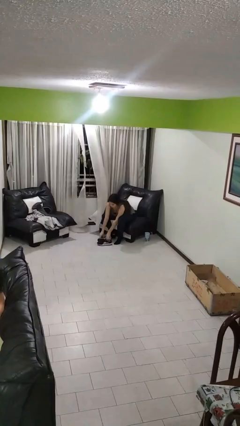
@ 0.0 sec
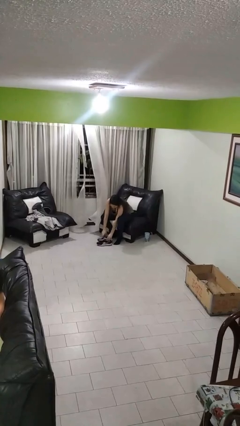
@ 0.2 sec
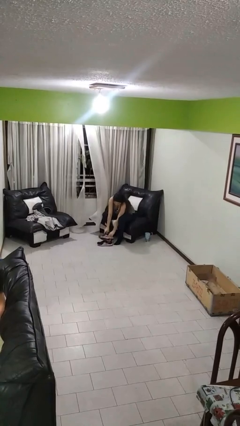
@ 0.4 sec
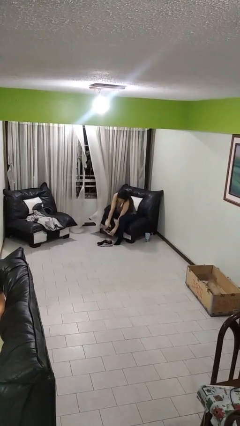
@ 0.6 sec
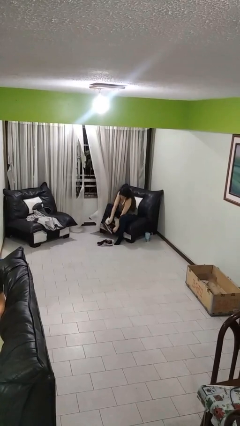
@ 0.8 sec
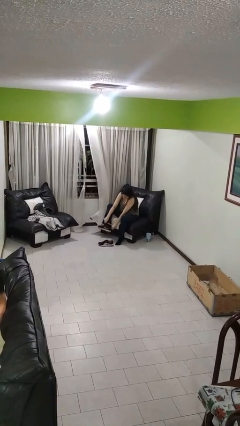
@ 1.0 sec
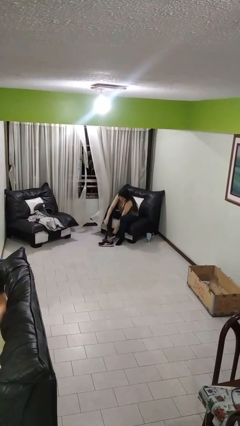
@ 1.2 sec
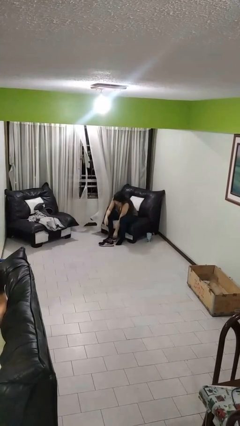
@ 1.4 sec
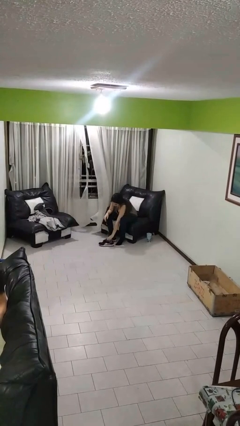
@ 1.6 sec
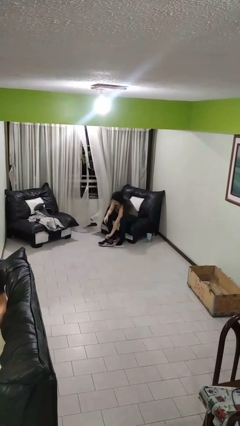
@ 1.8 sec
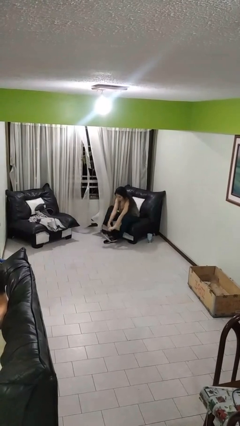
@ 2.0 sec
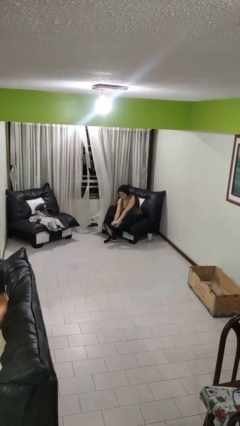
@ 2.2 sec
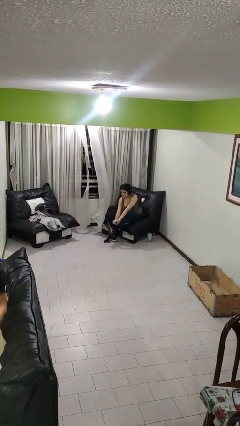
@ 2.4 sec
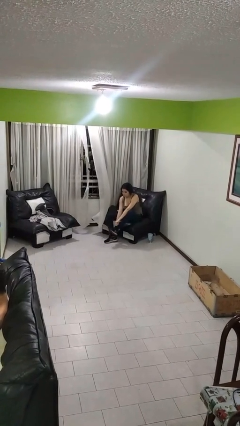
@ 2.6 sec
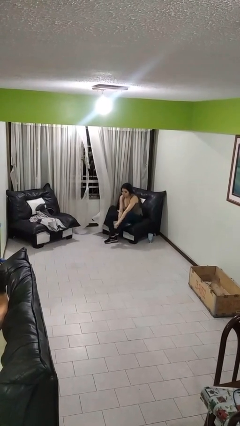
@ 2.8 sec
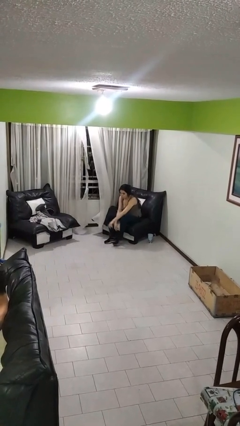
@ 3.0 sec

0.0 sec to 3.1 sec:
person puts on shoes

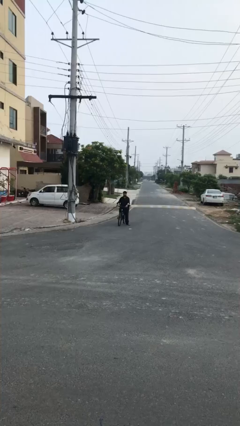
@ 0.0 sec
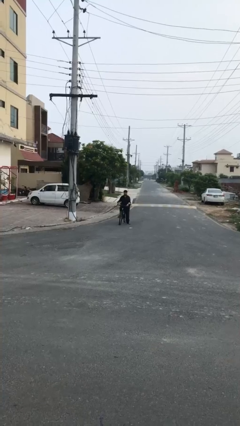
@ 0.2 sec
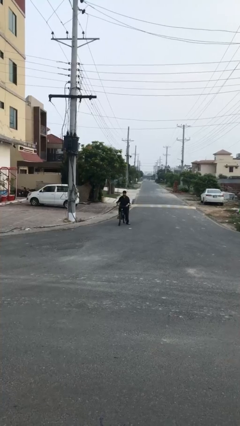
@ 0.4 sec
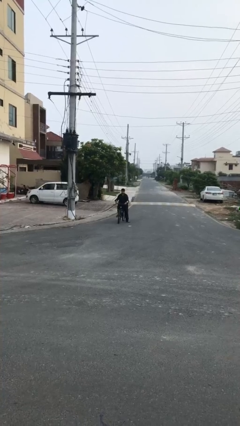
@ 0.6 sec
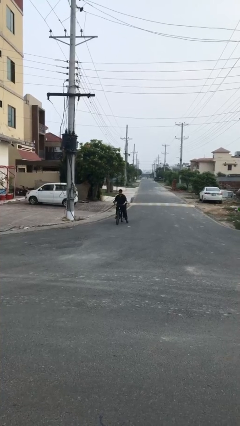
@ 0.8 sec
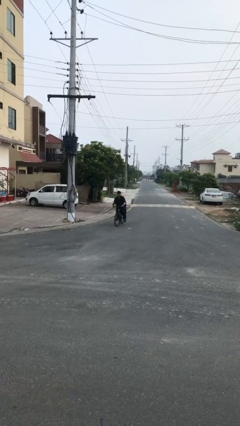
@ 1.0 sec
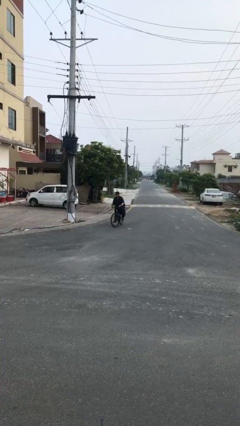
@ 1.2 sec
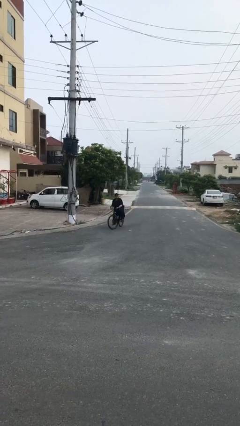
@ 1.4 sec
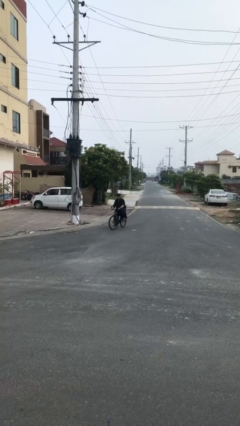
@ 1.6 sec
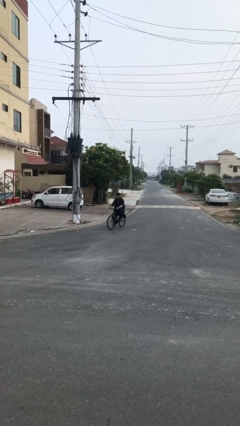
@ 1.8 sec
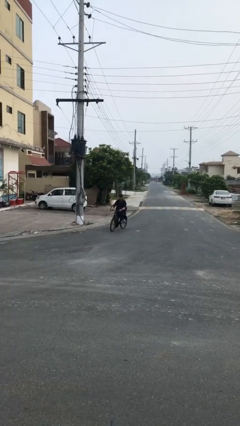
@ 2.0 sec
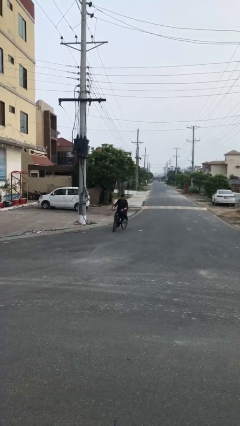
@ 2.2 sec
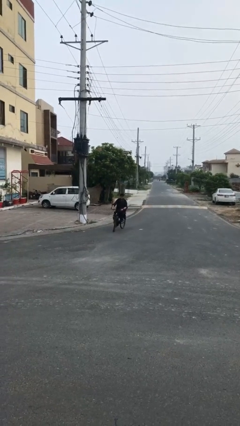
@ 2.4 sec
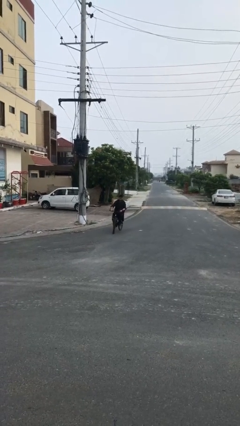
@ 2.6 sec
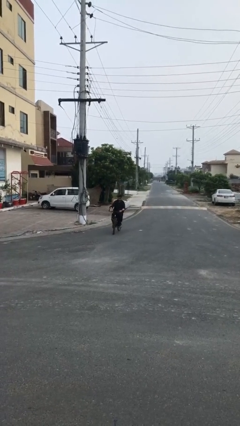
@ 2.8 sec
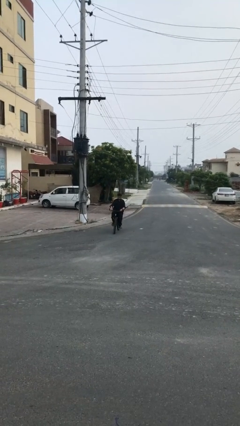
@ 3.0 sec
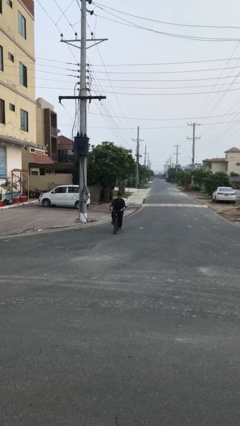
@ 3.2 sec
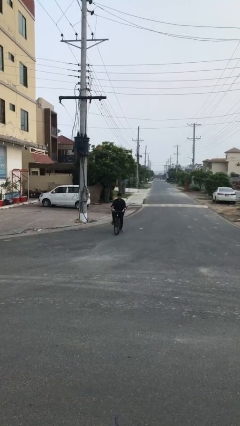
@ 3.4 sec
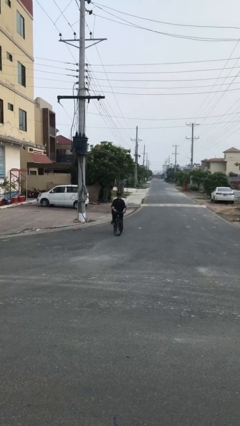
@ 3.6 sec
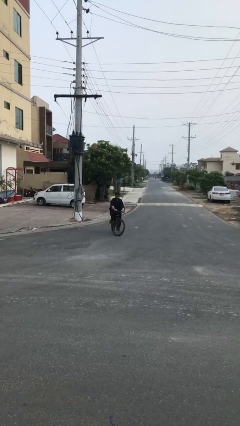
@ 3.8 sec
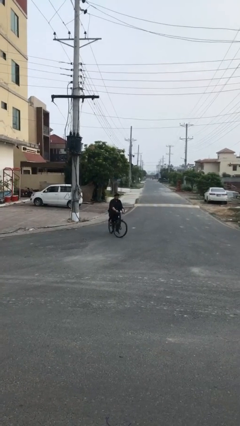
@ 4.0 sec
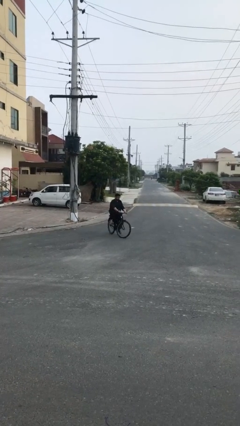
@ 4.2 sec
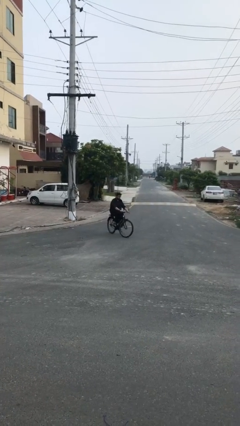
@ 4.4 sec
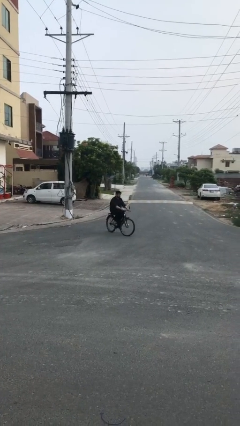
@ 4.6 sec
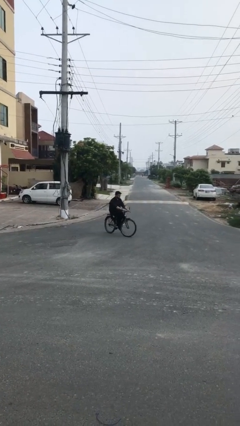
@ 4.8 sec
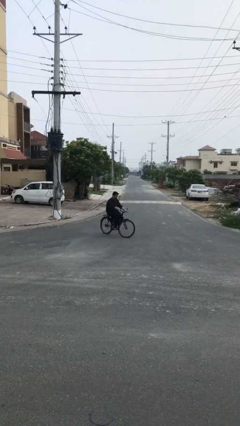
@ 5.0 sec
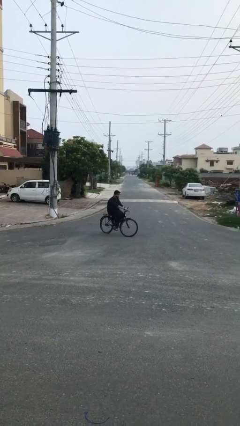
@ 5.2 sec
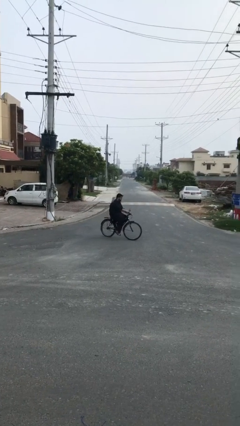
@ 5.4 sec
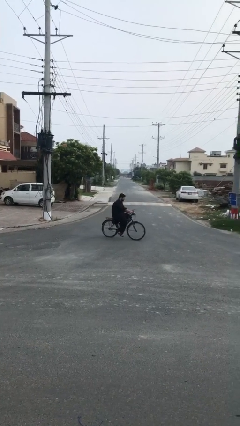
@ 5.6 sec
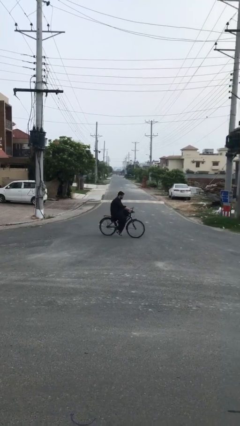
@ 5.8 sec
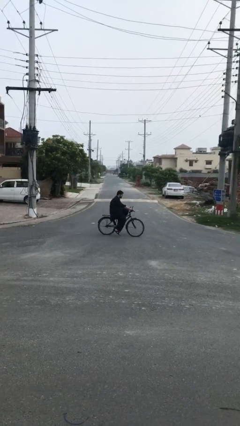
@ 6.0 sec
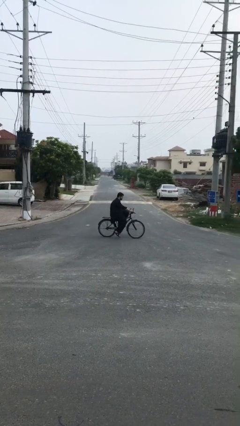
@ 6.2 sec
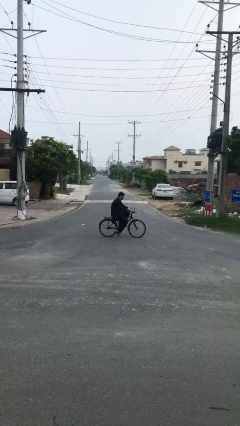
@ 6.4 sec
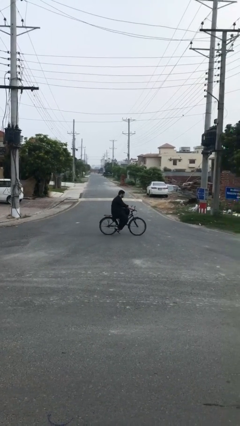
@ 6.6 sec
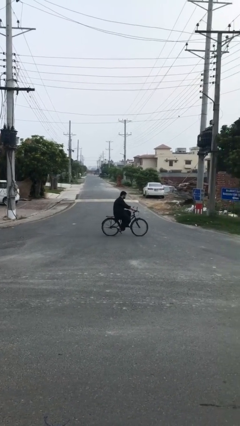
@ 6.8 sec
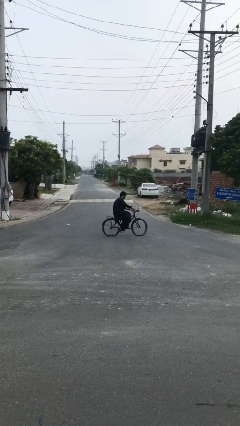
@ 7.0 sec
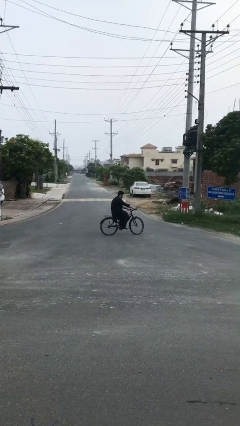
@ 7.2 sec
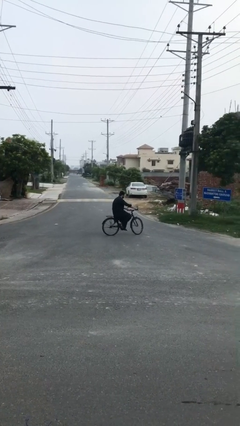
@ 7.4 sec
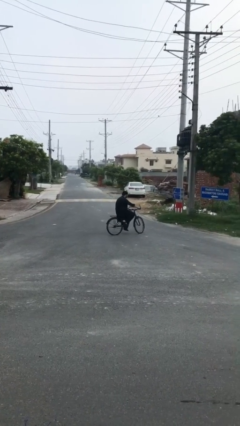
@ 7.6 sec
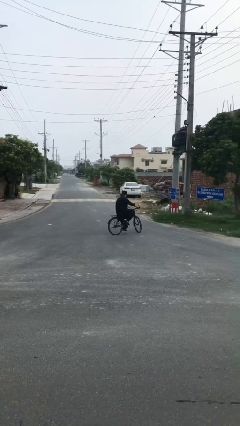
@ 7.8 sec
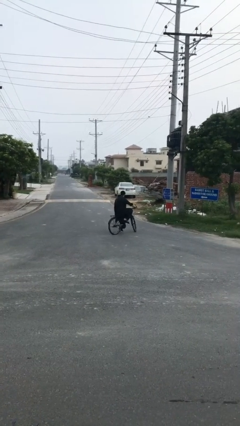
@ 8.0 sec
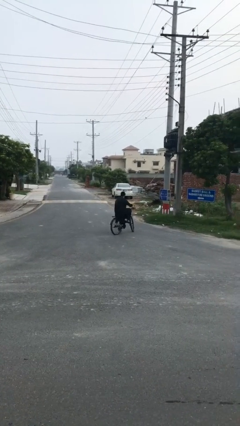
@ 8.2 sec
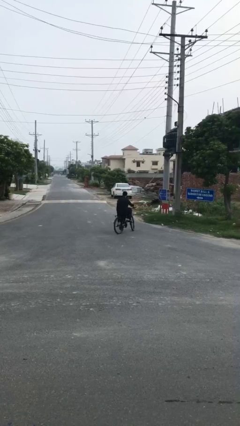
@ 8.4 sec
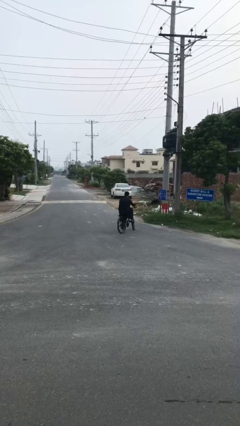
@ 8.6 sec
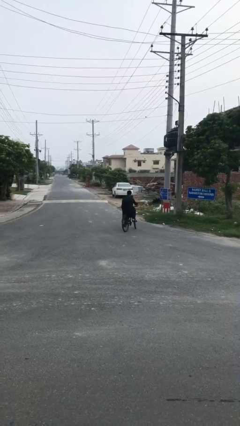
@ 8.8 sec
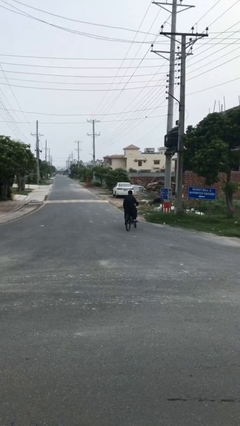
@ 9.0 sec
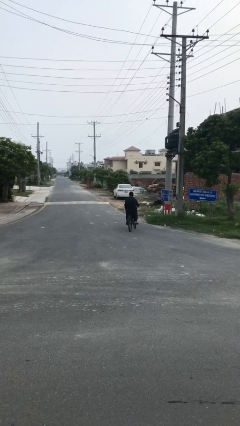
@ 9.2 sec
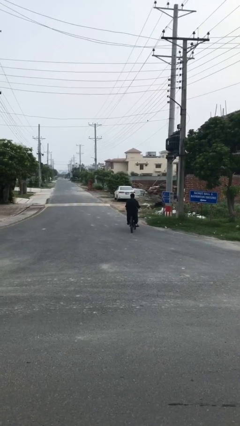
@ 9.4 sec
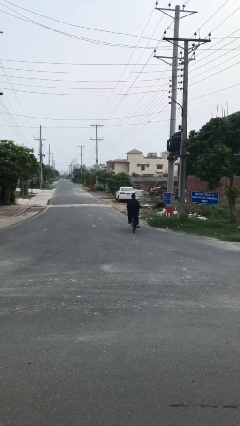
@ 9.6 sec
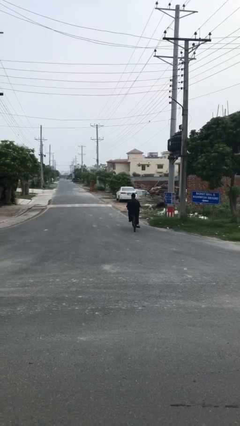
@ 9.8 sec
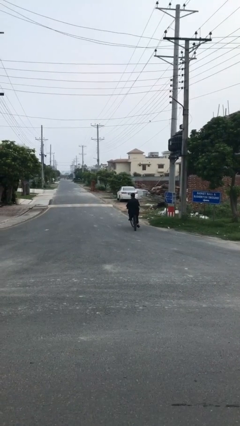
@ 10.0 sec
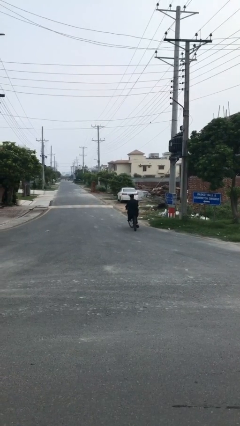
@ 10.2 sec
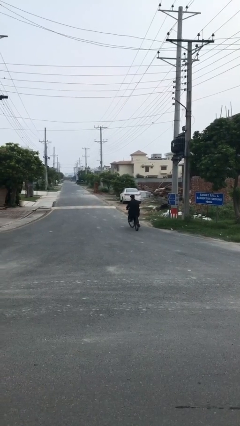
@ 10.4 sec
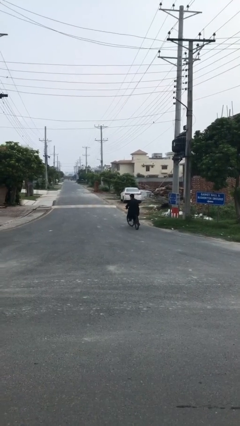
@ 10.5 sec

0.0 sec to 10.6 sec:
person rides bicycle

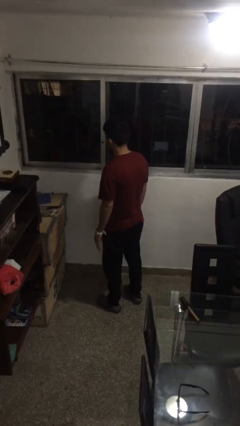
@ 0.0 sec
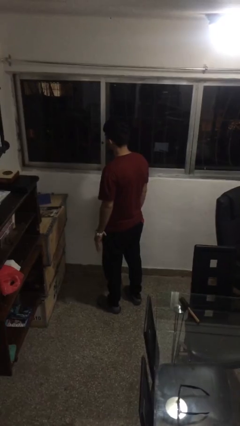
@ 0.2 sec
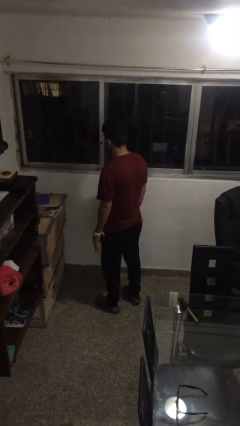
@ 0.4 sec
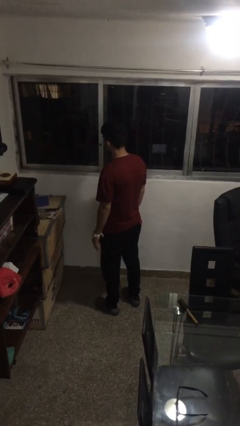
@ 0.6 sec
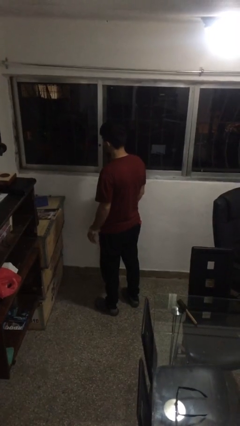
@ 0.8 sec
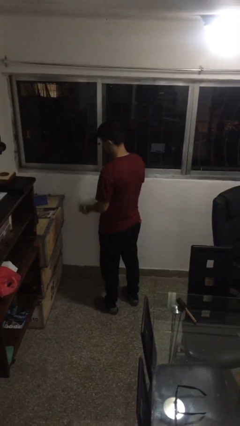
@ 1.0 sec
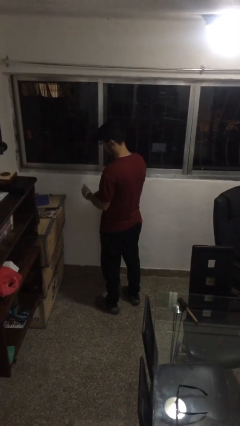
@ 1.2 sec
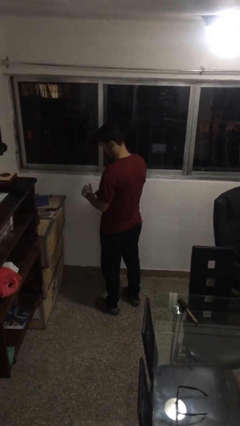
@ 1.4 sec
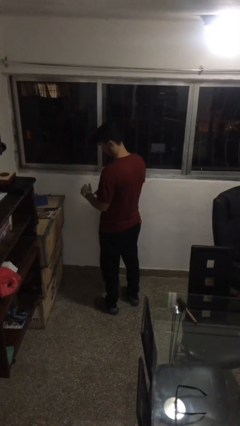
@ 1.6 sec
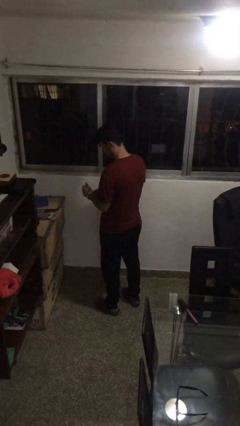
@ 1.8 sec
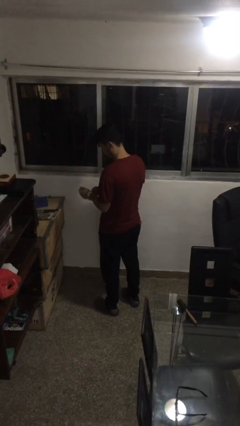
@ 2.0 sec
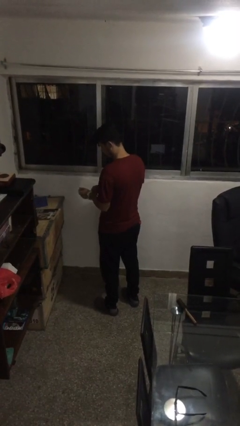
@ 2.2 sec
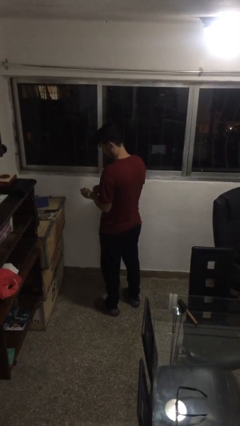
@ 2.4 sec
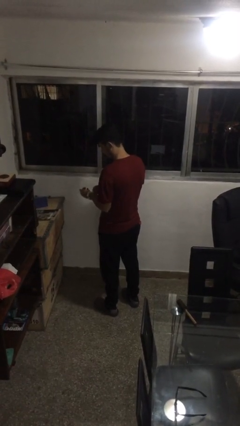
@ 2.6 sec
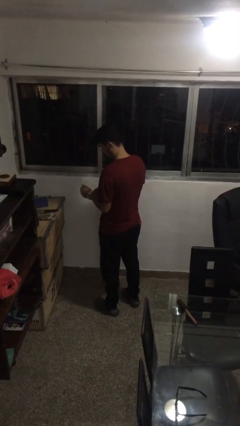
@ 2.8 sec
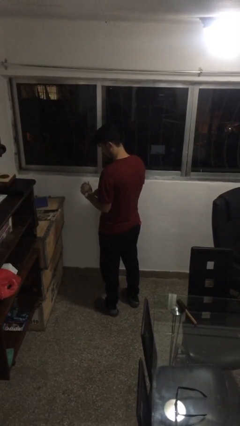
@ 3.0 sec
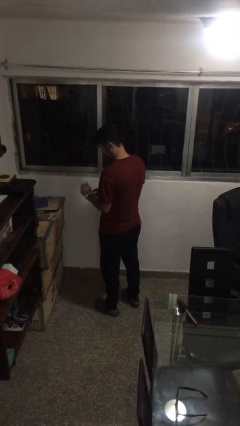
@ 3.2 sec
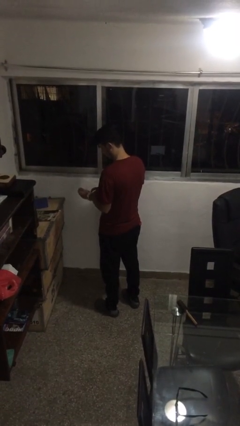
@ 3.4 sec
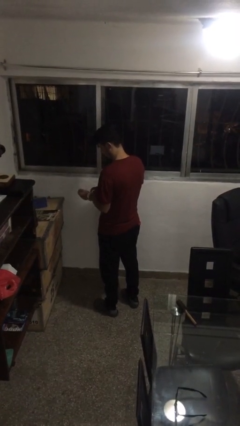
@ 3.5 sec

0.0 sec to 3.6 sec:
person takes off wristwatch

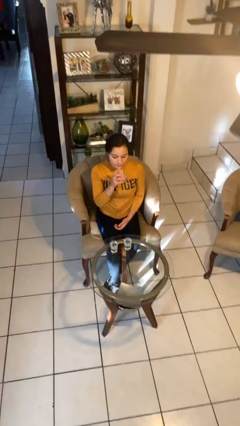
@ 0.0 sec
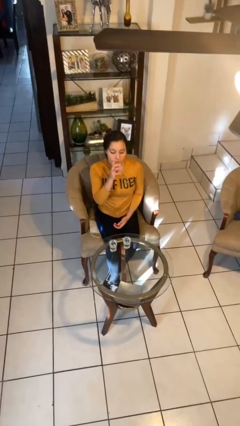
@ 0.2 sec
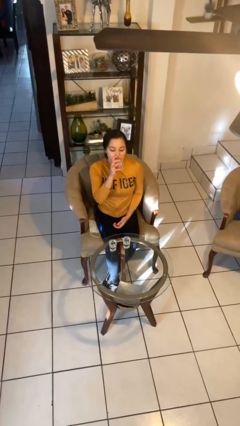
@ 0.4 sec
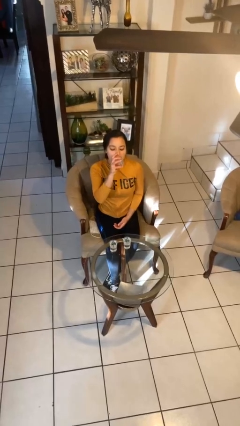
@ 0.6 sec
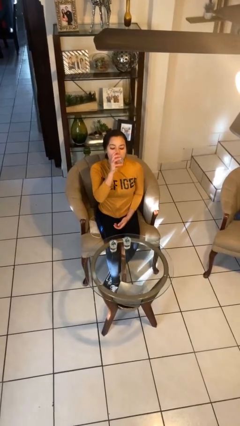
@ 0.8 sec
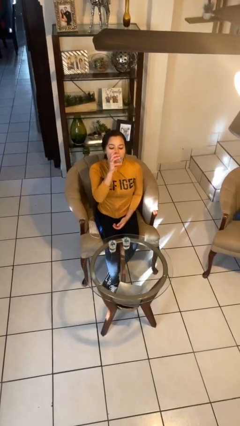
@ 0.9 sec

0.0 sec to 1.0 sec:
person drinks from shotglass
